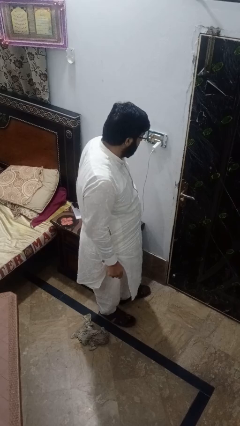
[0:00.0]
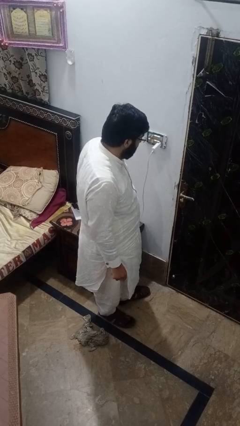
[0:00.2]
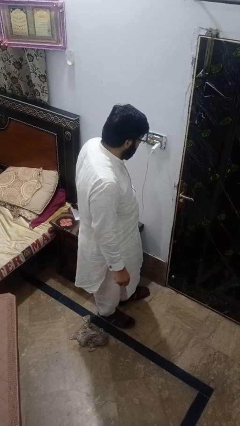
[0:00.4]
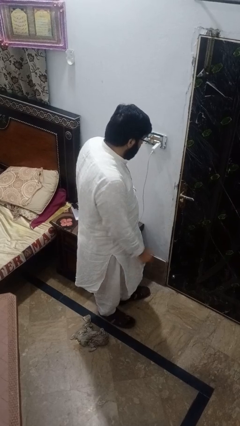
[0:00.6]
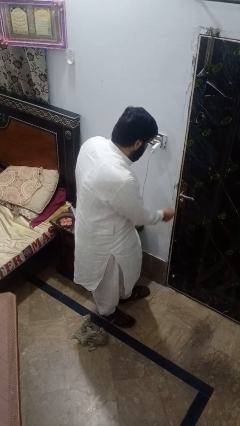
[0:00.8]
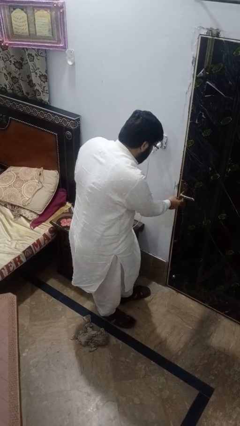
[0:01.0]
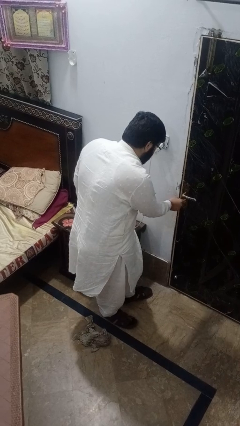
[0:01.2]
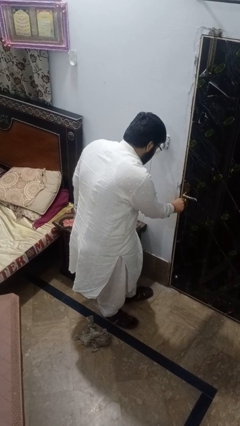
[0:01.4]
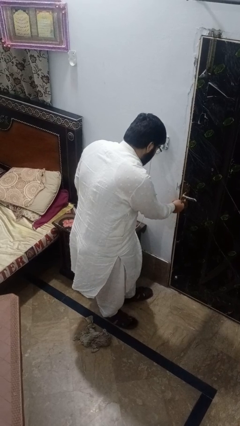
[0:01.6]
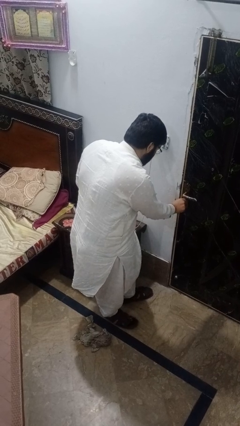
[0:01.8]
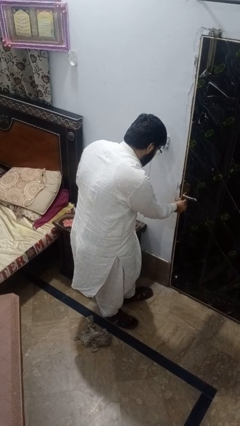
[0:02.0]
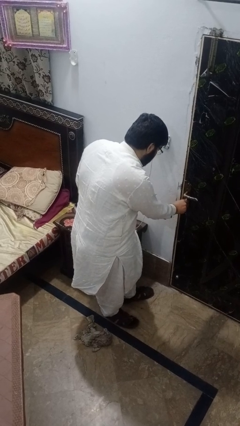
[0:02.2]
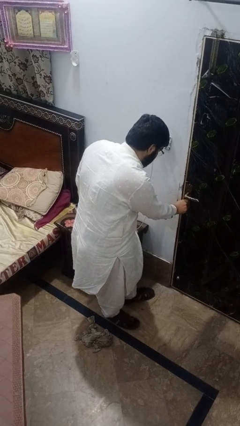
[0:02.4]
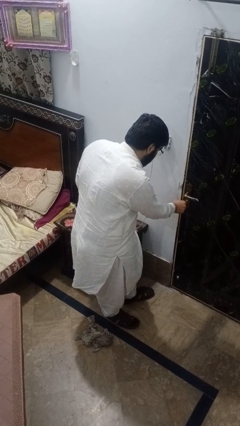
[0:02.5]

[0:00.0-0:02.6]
person unlocks door with keys

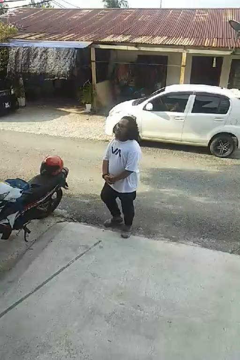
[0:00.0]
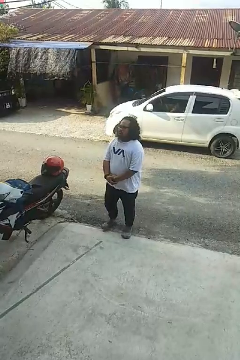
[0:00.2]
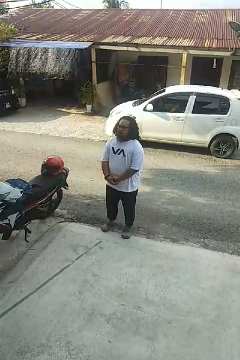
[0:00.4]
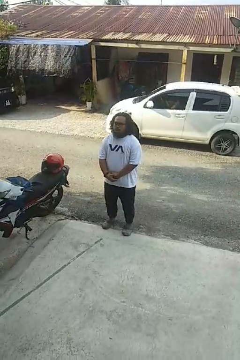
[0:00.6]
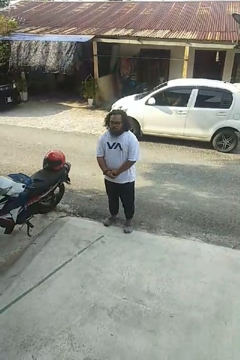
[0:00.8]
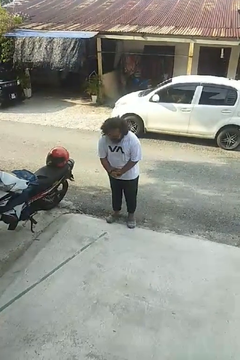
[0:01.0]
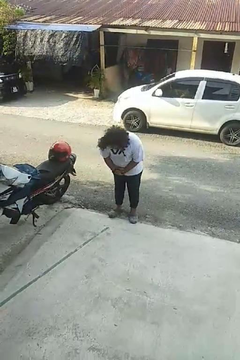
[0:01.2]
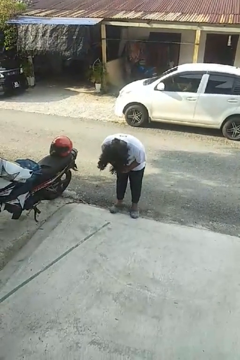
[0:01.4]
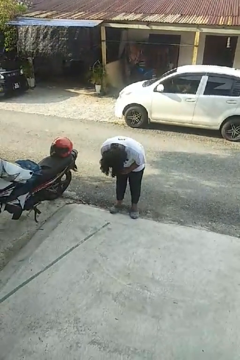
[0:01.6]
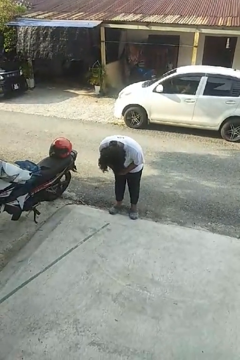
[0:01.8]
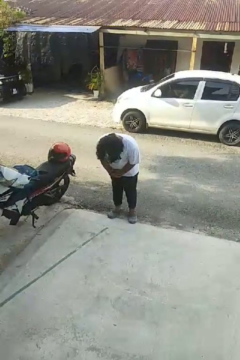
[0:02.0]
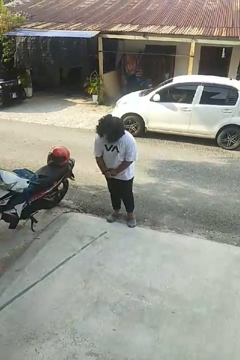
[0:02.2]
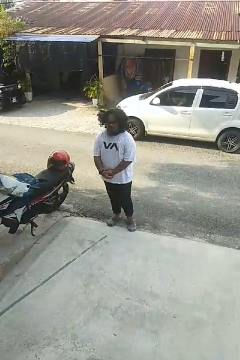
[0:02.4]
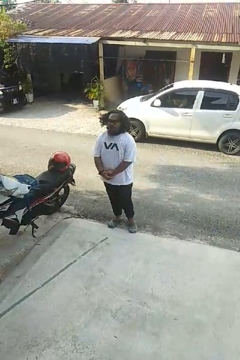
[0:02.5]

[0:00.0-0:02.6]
person bows

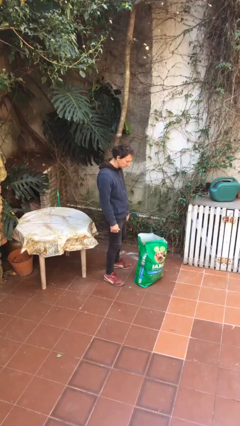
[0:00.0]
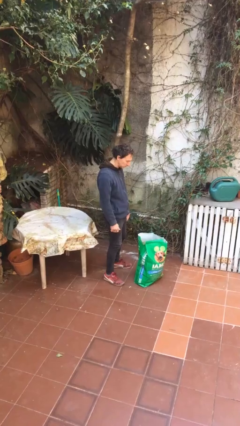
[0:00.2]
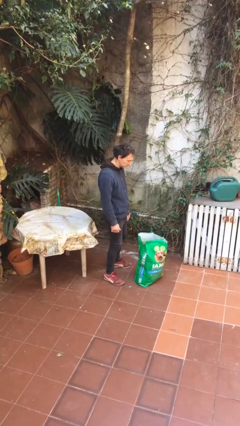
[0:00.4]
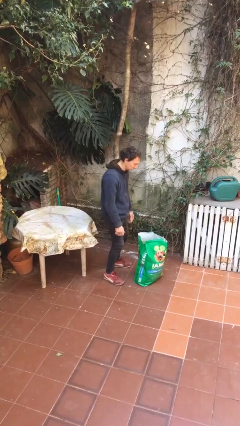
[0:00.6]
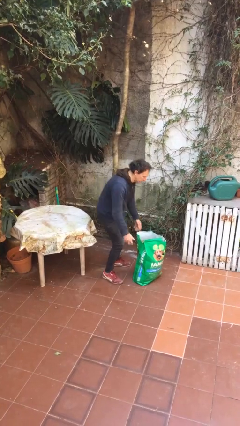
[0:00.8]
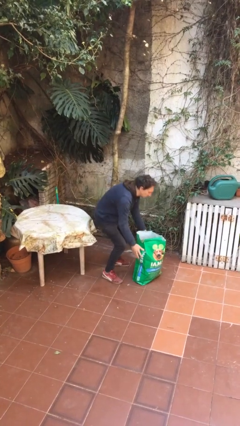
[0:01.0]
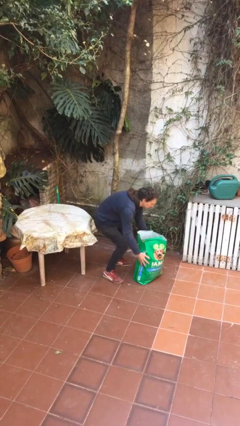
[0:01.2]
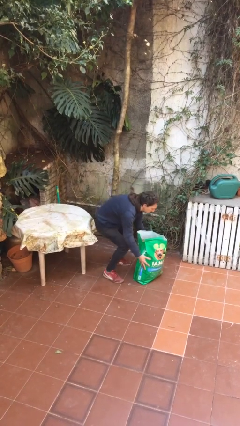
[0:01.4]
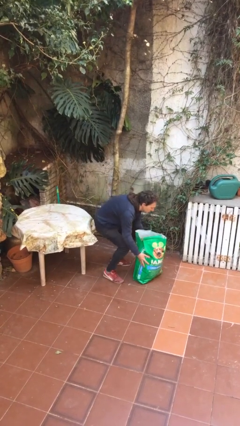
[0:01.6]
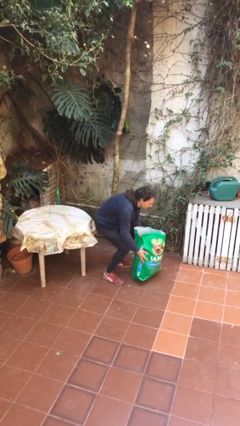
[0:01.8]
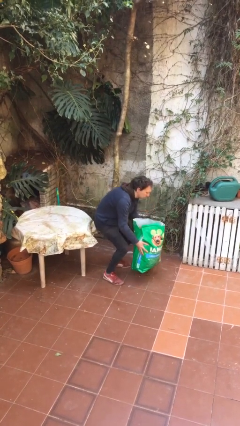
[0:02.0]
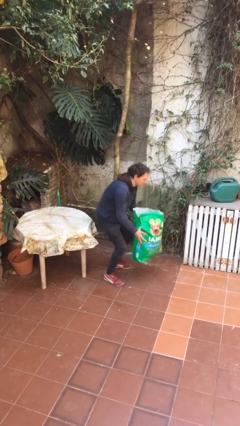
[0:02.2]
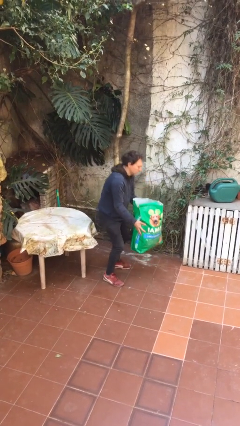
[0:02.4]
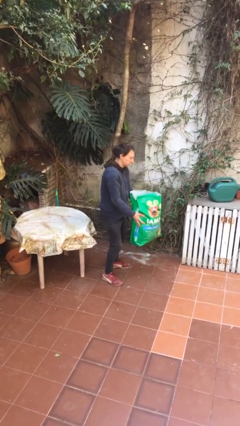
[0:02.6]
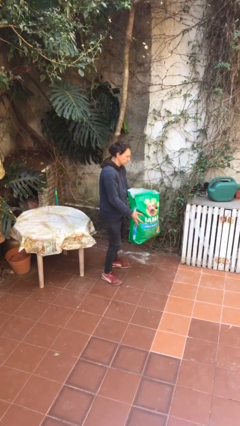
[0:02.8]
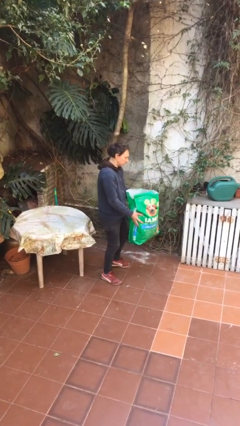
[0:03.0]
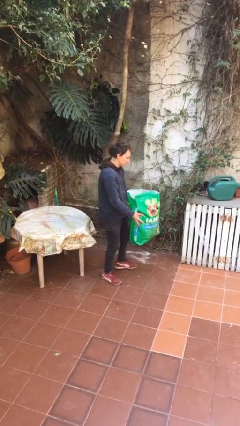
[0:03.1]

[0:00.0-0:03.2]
person picks up object from floor

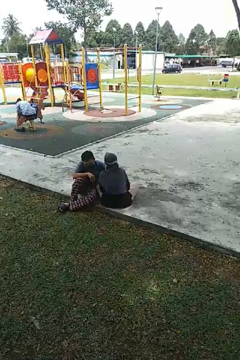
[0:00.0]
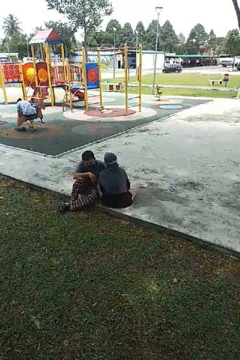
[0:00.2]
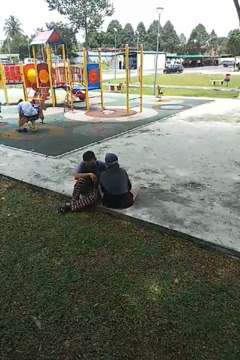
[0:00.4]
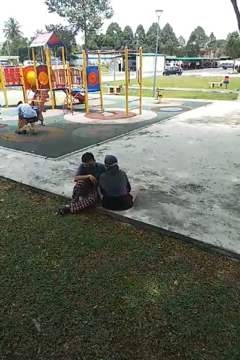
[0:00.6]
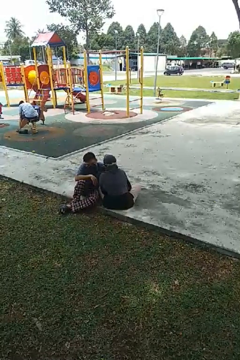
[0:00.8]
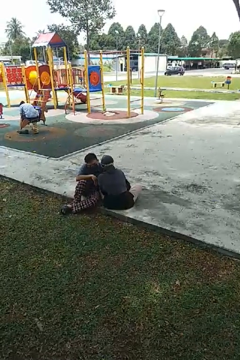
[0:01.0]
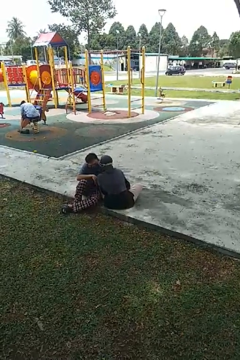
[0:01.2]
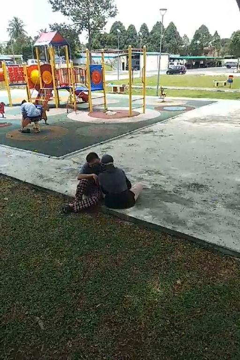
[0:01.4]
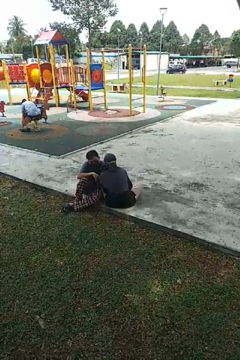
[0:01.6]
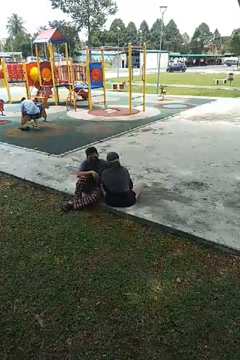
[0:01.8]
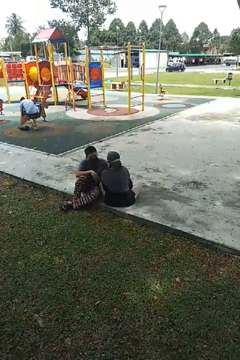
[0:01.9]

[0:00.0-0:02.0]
person kisses cheek of person

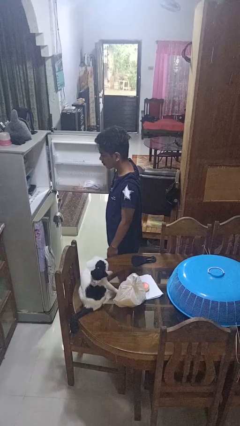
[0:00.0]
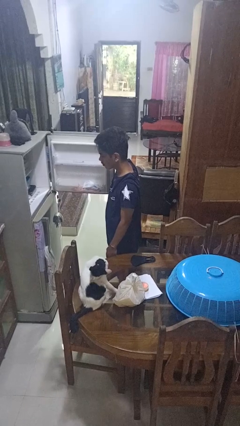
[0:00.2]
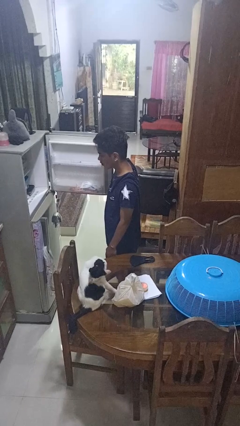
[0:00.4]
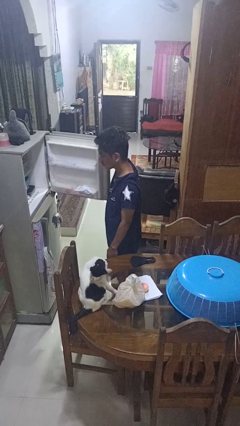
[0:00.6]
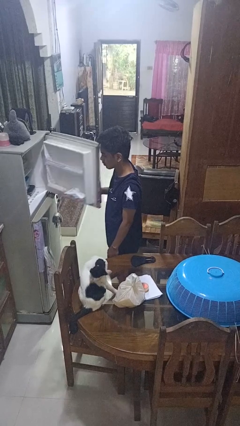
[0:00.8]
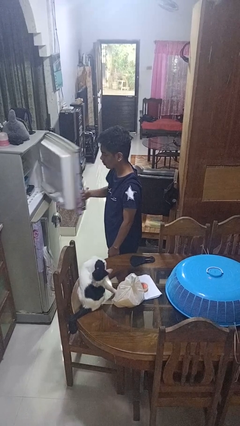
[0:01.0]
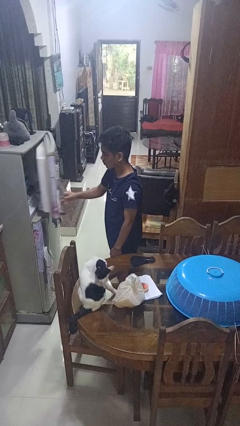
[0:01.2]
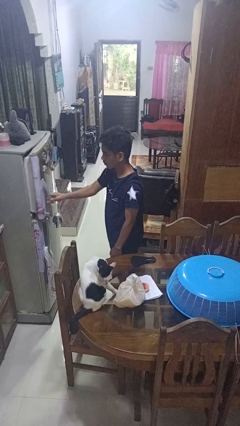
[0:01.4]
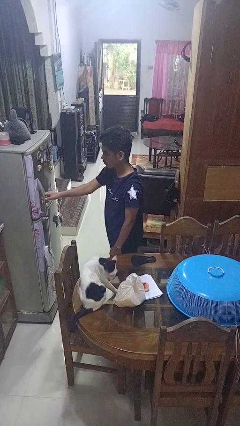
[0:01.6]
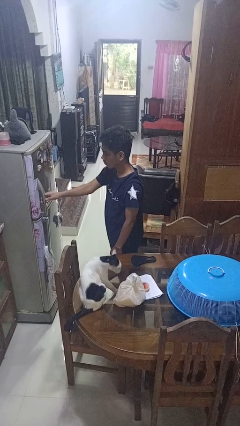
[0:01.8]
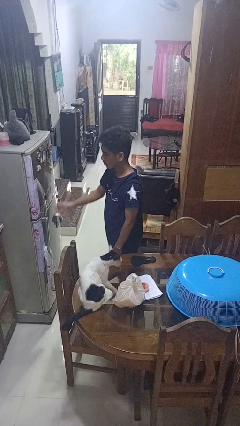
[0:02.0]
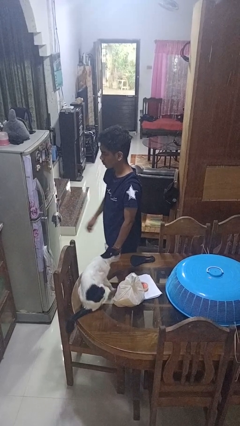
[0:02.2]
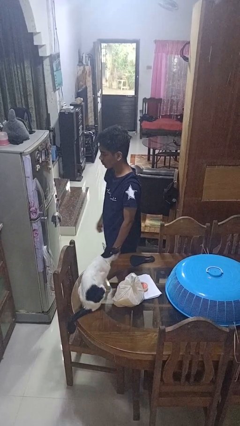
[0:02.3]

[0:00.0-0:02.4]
person closes refrigerator

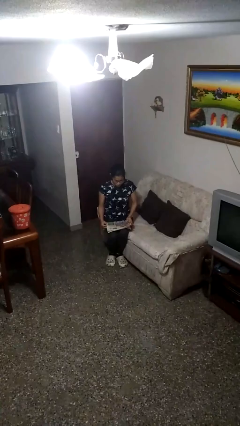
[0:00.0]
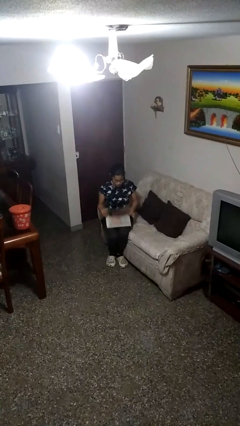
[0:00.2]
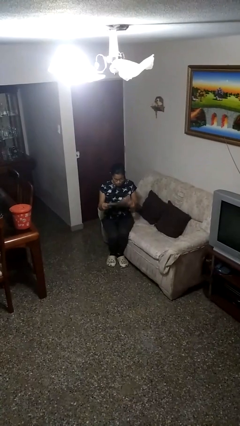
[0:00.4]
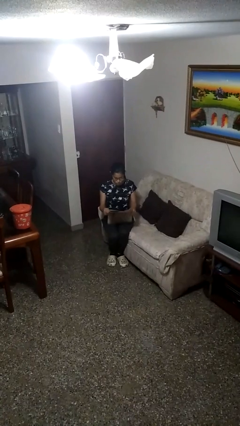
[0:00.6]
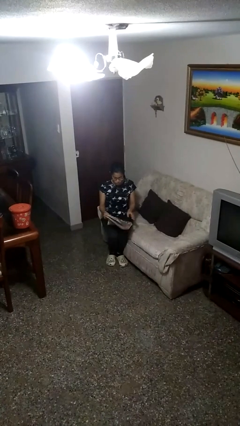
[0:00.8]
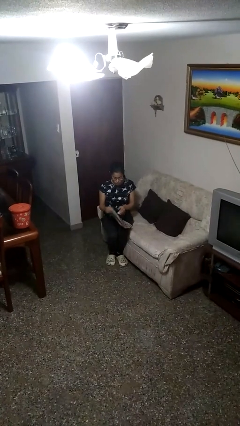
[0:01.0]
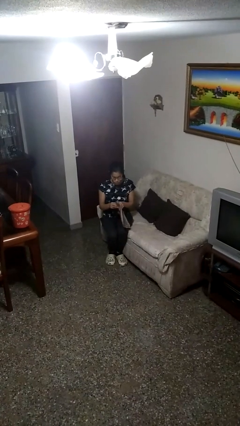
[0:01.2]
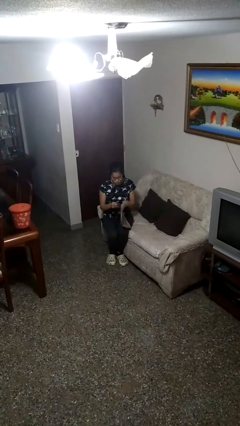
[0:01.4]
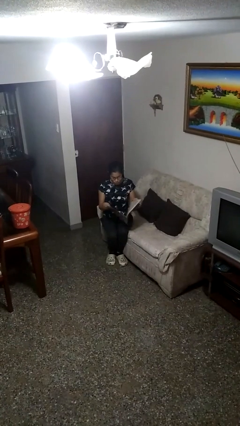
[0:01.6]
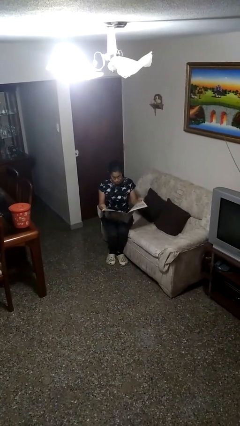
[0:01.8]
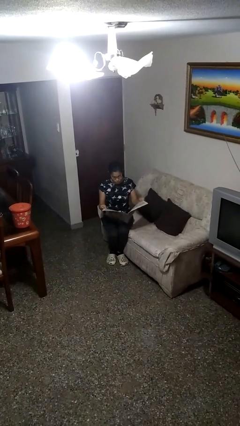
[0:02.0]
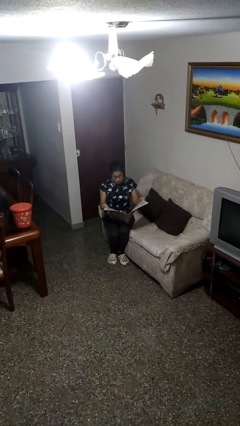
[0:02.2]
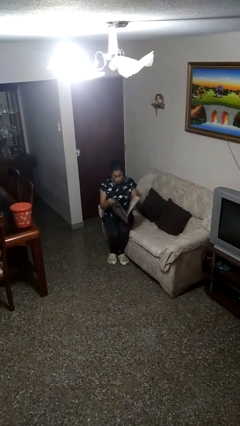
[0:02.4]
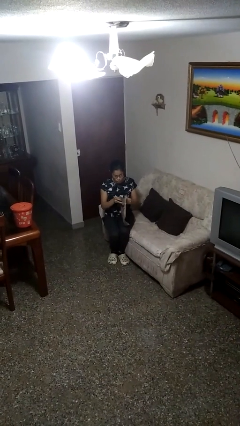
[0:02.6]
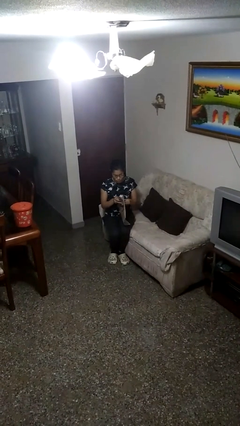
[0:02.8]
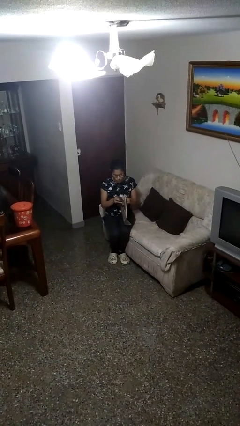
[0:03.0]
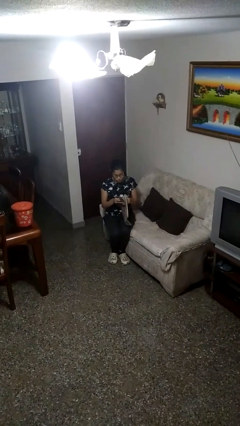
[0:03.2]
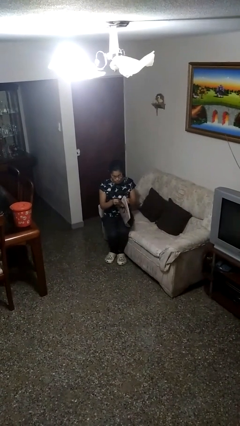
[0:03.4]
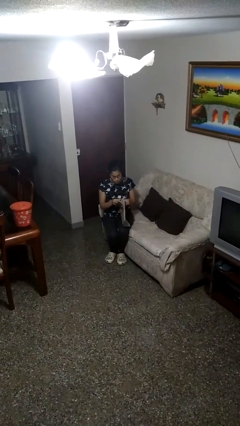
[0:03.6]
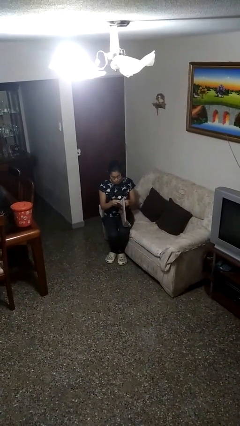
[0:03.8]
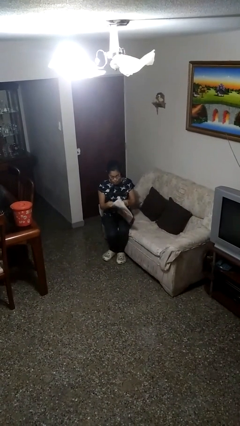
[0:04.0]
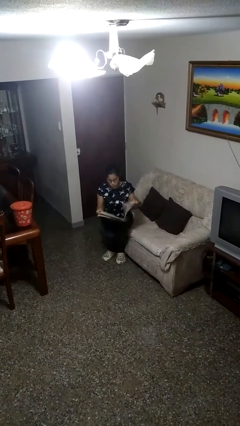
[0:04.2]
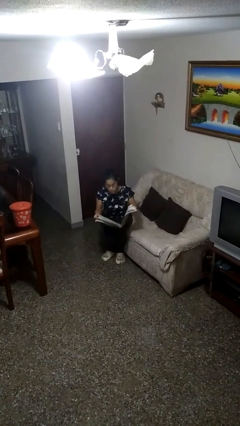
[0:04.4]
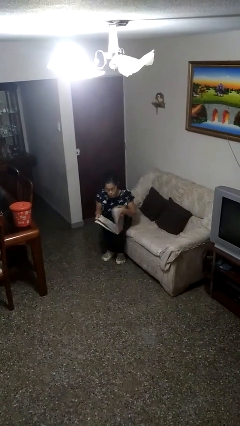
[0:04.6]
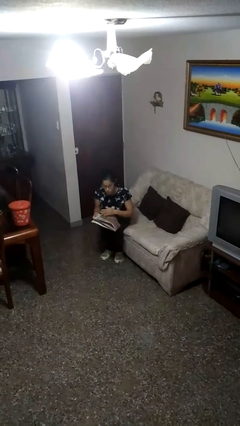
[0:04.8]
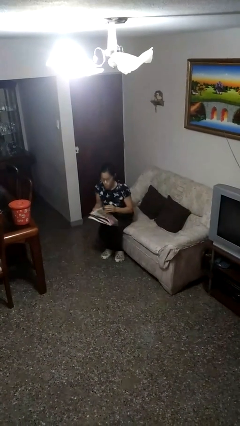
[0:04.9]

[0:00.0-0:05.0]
person reads newspaper

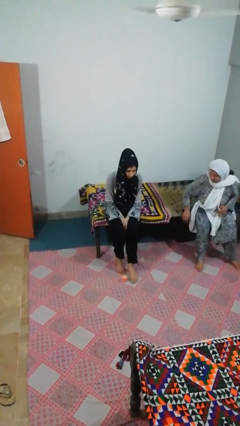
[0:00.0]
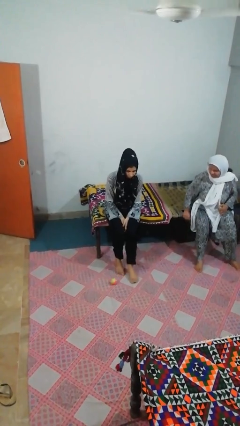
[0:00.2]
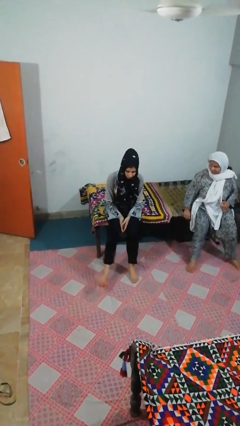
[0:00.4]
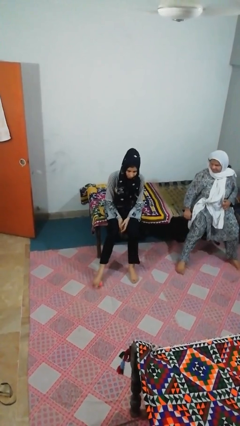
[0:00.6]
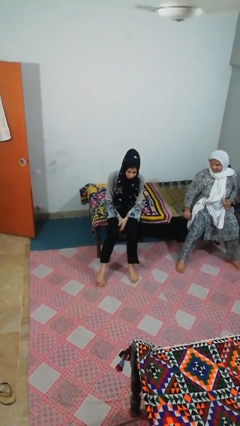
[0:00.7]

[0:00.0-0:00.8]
person kicks object to person
